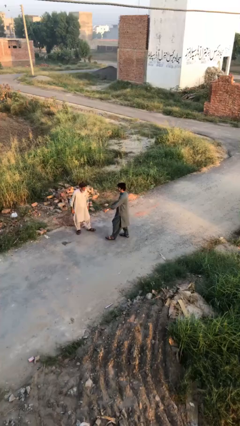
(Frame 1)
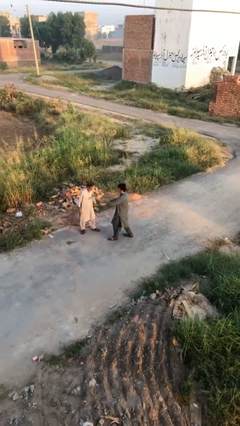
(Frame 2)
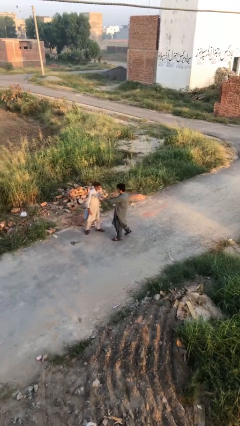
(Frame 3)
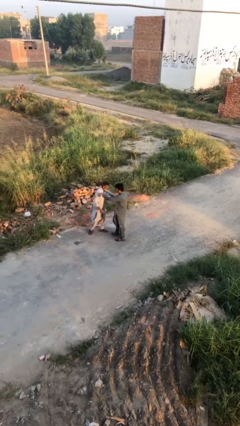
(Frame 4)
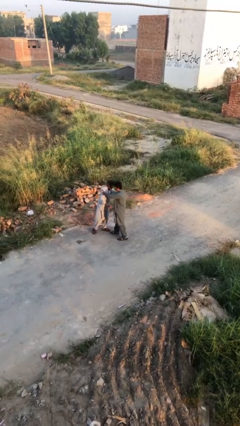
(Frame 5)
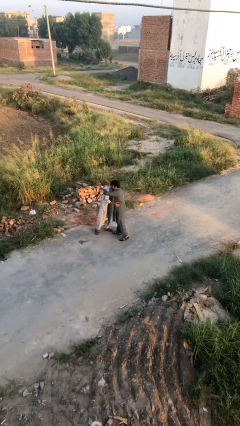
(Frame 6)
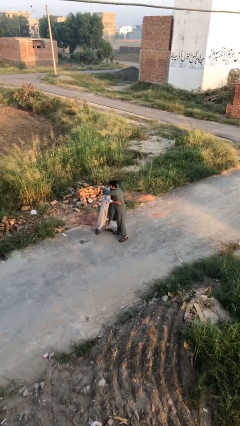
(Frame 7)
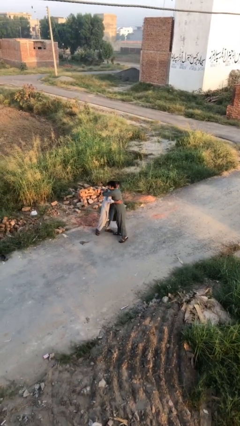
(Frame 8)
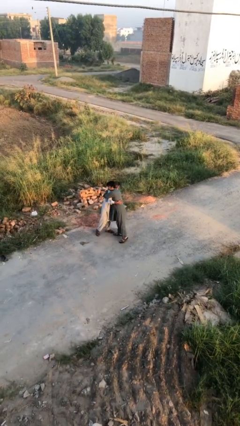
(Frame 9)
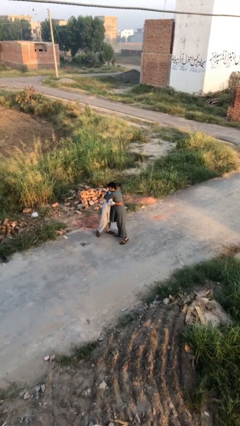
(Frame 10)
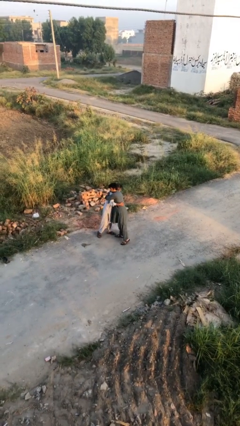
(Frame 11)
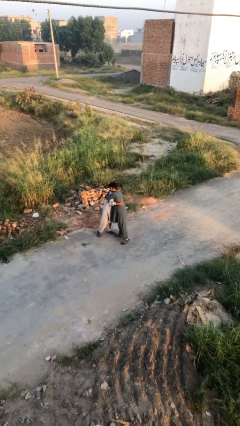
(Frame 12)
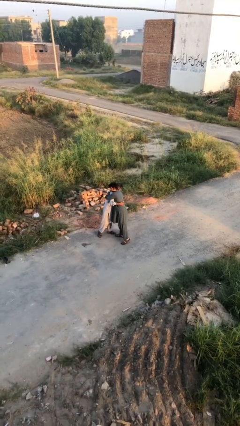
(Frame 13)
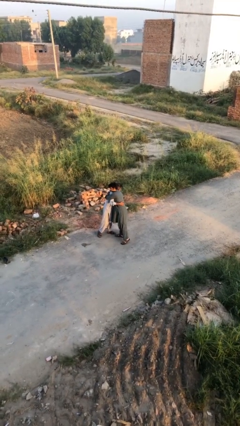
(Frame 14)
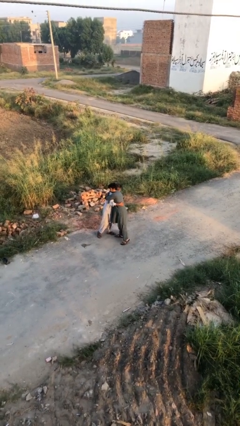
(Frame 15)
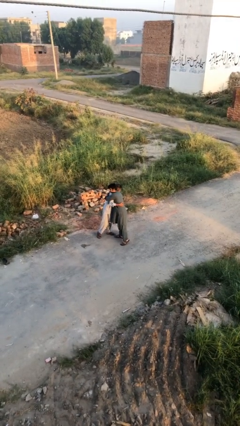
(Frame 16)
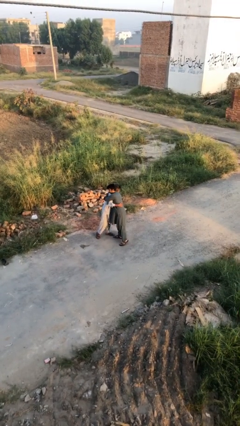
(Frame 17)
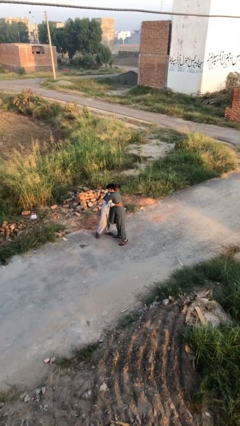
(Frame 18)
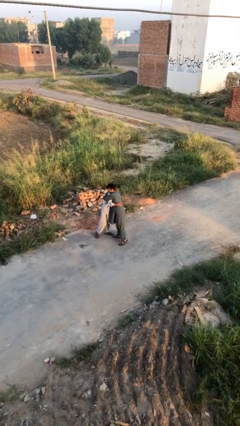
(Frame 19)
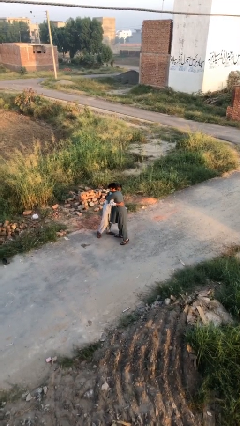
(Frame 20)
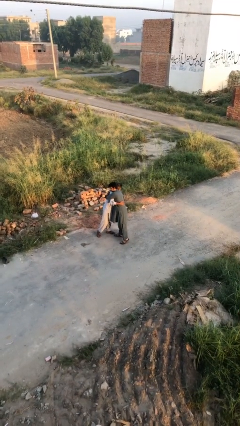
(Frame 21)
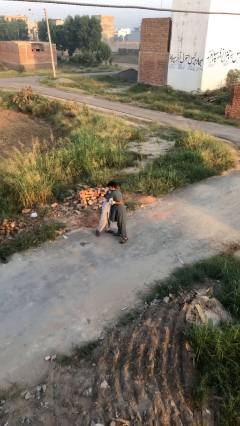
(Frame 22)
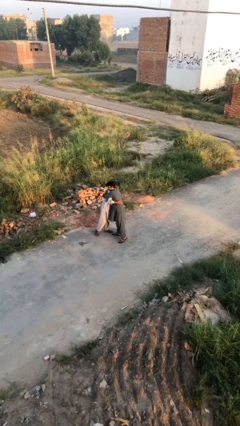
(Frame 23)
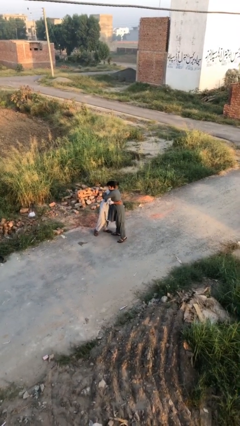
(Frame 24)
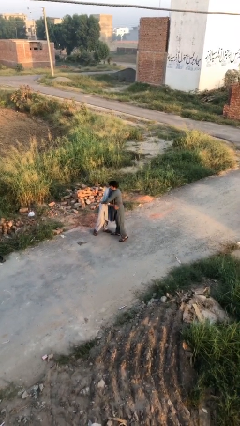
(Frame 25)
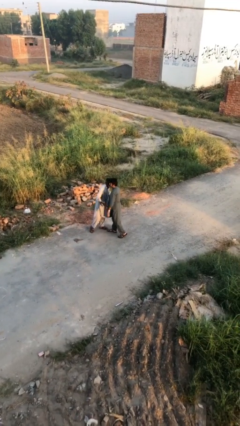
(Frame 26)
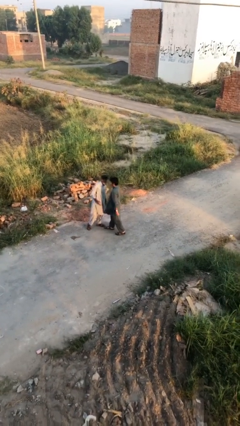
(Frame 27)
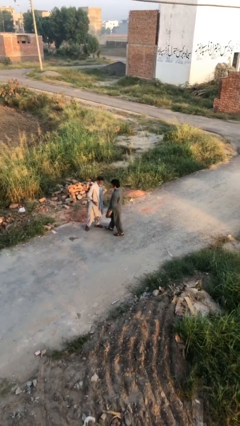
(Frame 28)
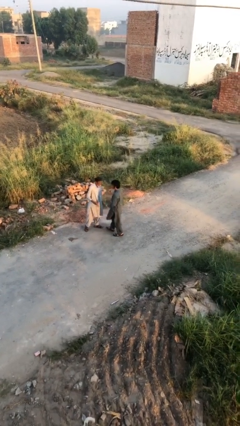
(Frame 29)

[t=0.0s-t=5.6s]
person embraces person

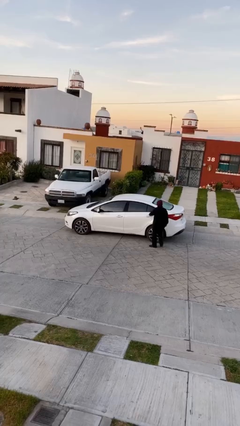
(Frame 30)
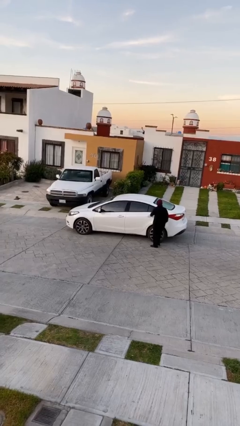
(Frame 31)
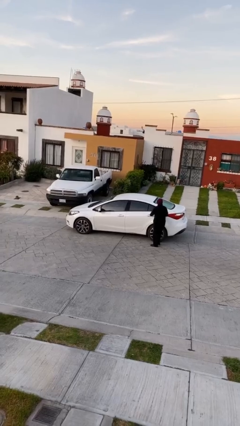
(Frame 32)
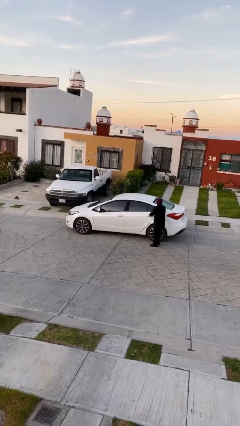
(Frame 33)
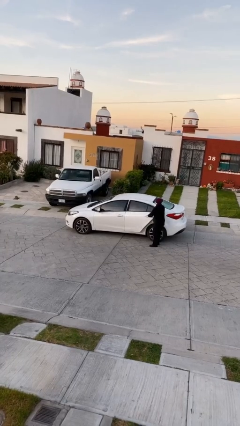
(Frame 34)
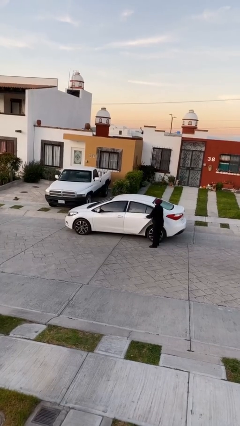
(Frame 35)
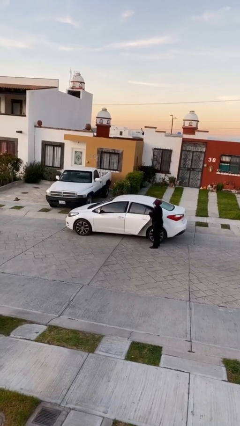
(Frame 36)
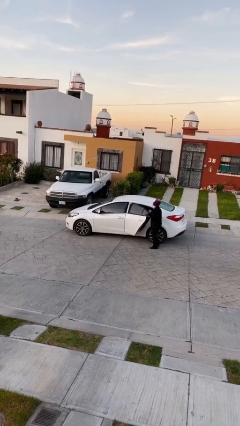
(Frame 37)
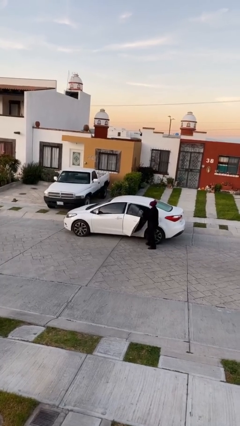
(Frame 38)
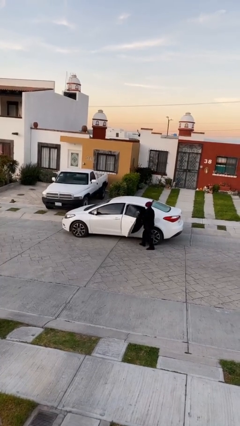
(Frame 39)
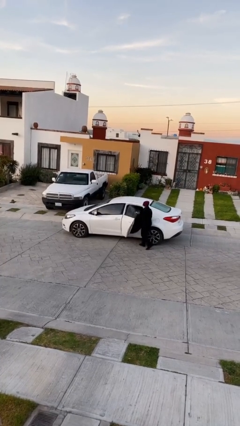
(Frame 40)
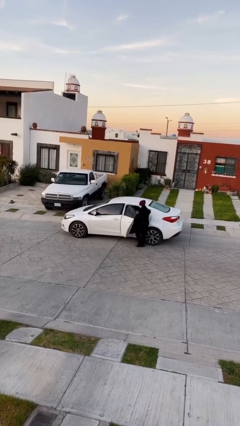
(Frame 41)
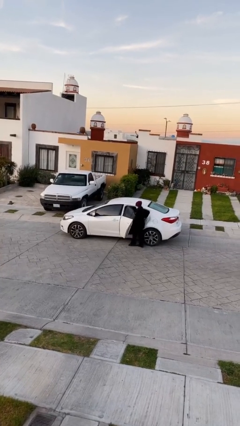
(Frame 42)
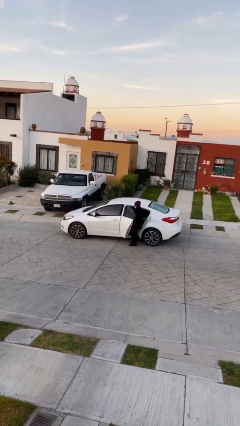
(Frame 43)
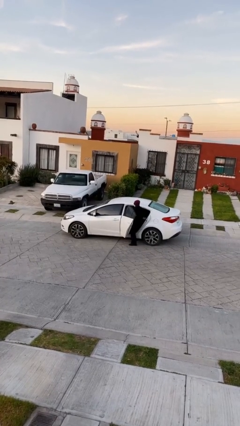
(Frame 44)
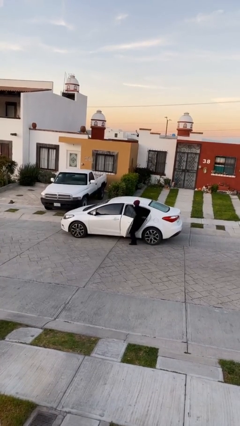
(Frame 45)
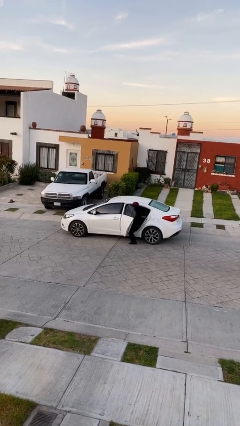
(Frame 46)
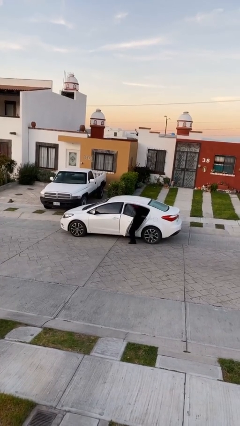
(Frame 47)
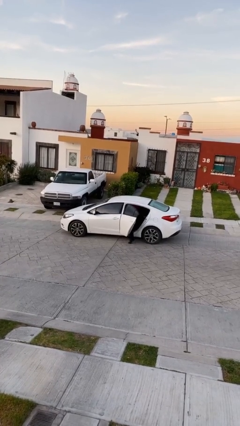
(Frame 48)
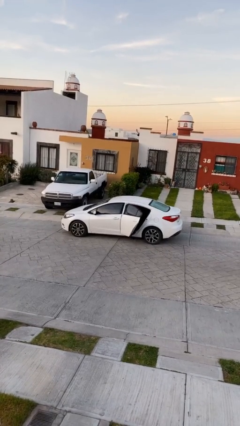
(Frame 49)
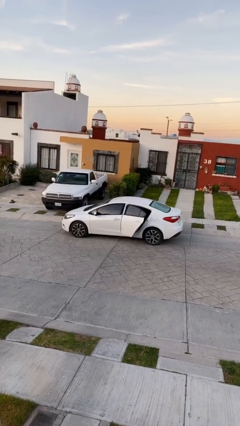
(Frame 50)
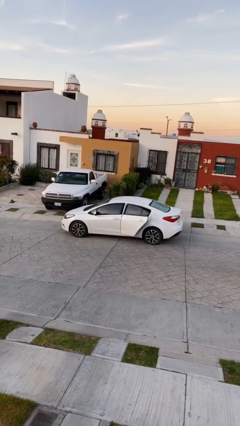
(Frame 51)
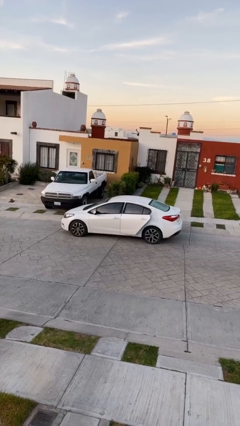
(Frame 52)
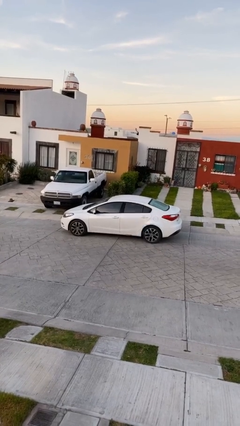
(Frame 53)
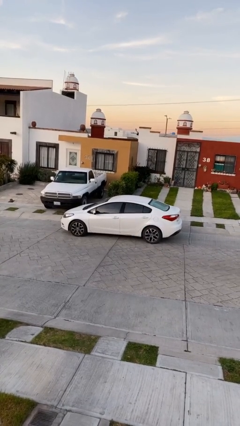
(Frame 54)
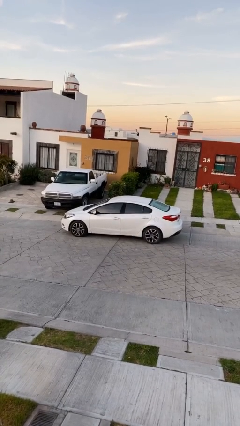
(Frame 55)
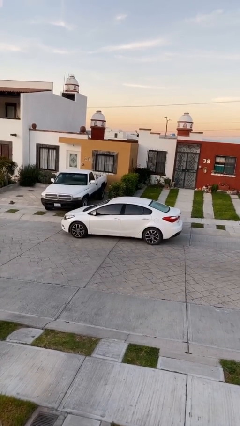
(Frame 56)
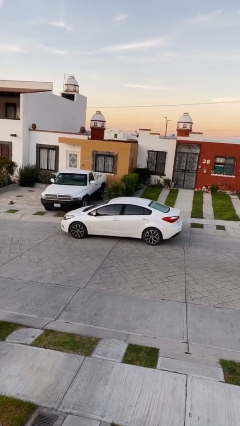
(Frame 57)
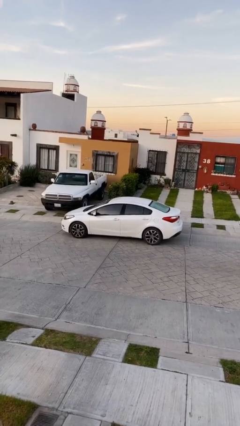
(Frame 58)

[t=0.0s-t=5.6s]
car picks up person

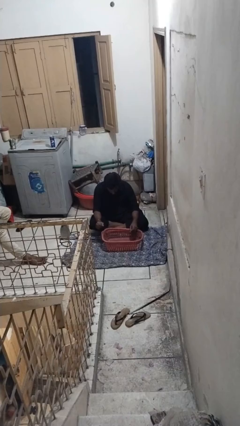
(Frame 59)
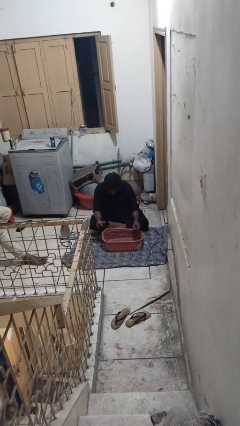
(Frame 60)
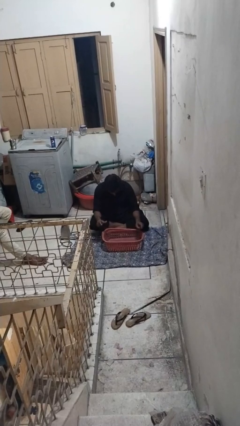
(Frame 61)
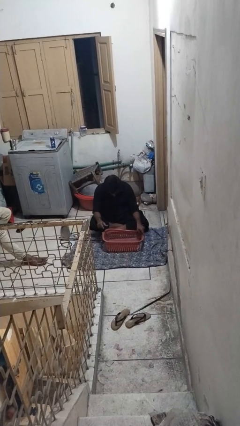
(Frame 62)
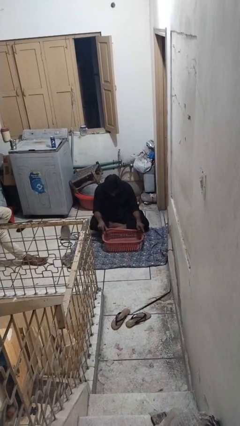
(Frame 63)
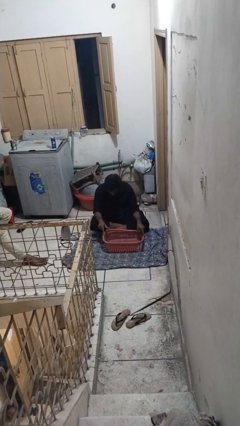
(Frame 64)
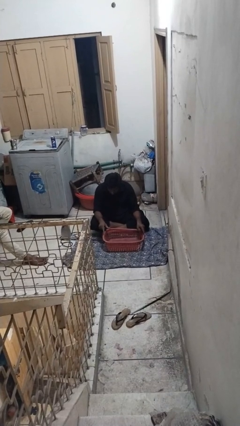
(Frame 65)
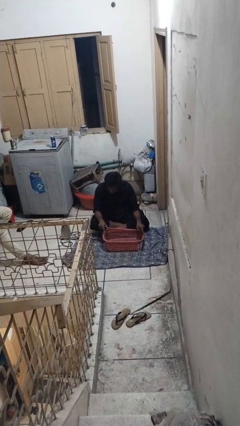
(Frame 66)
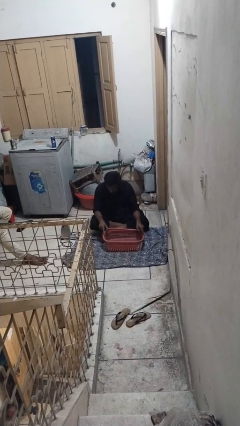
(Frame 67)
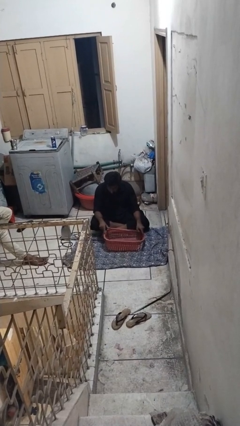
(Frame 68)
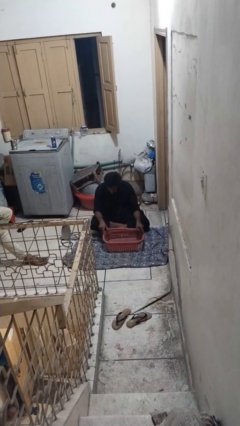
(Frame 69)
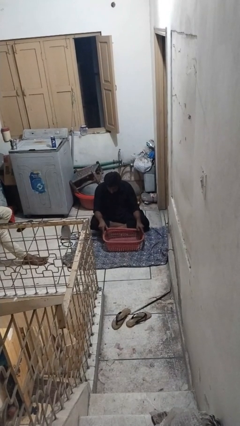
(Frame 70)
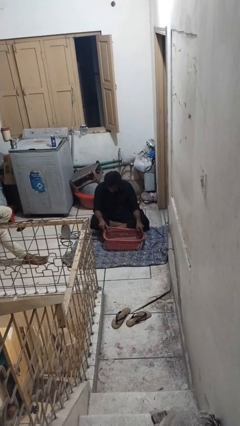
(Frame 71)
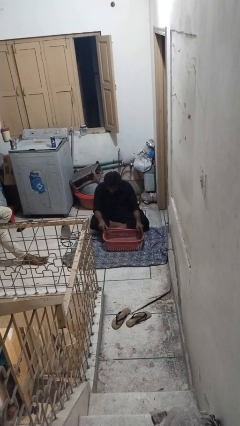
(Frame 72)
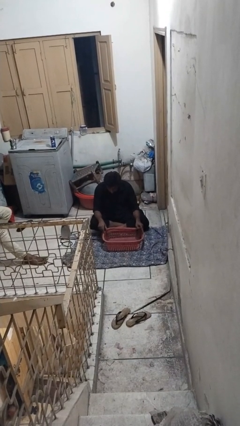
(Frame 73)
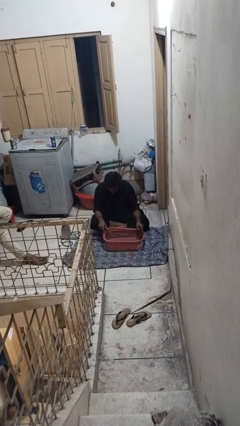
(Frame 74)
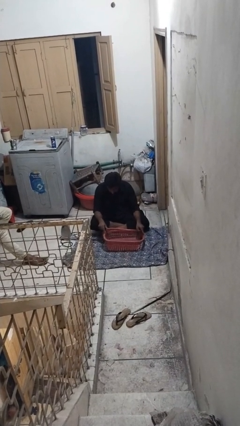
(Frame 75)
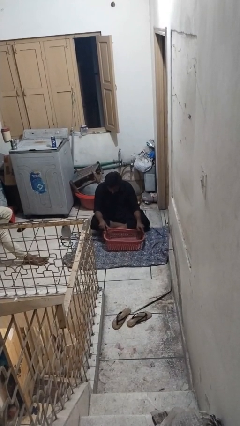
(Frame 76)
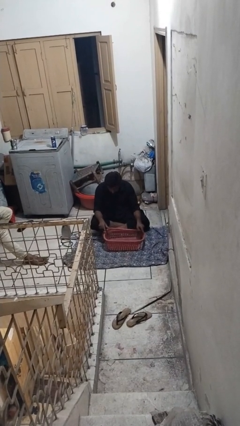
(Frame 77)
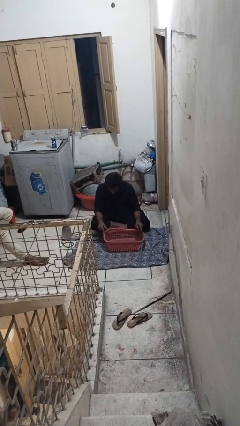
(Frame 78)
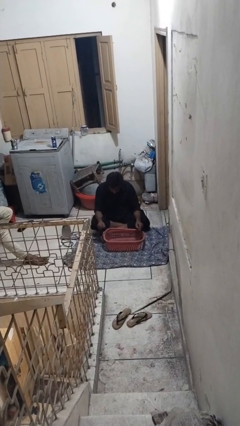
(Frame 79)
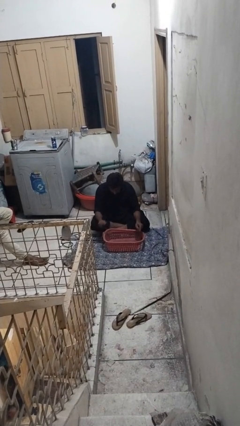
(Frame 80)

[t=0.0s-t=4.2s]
person taps object with finger

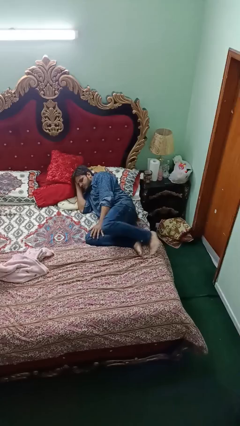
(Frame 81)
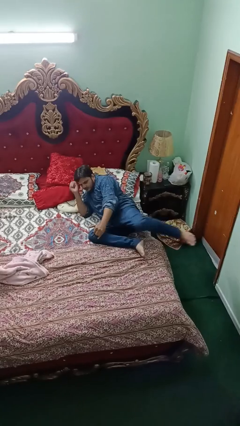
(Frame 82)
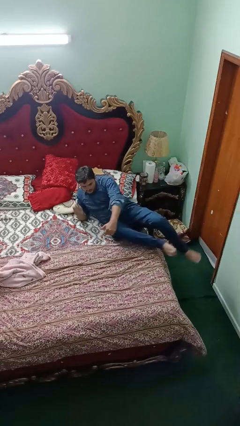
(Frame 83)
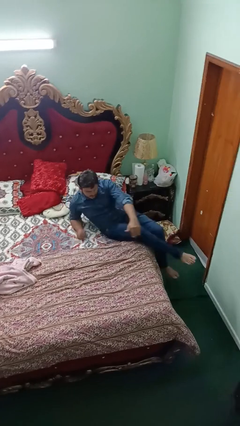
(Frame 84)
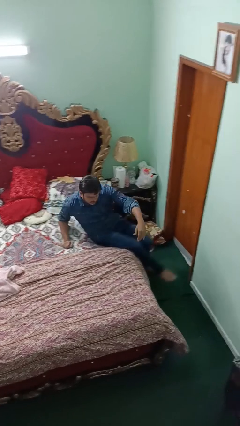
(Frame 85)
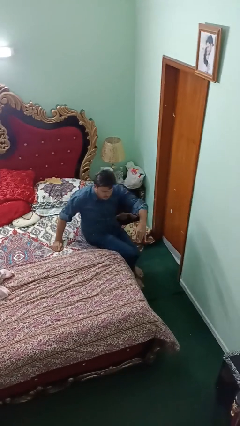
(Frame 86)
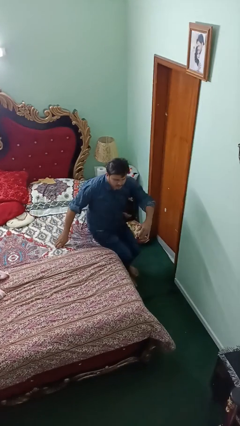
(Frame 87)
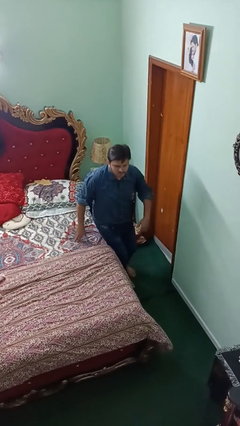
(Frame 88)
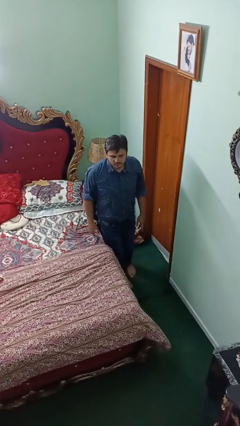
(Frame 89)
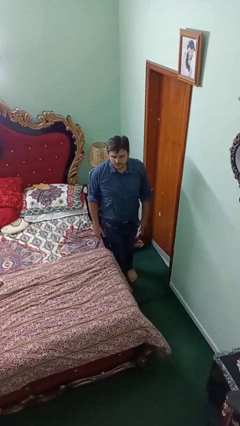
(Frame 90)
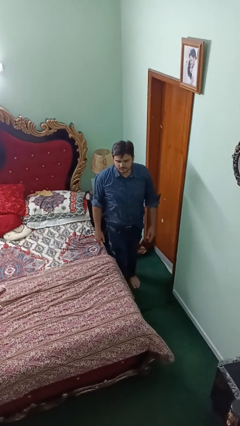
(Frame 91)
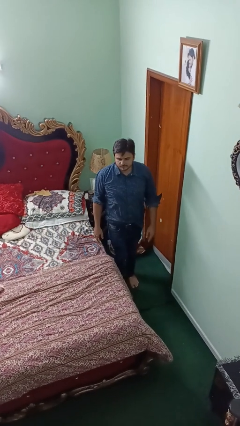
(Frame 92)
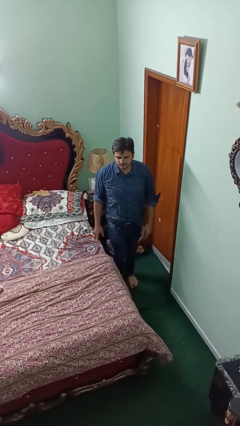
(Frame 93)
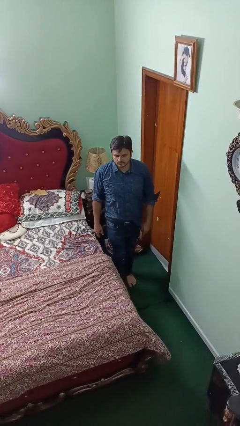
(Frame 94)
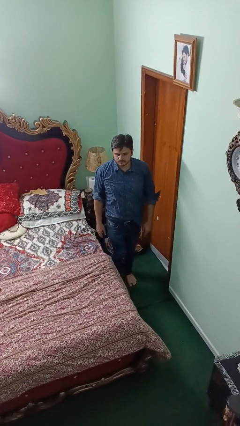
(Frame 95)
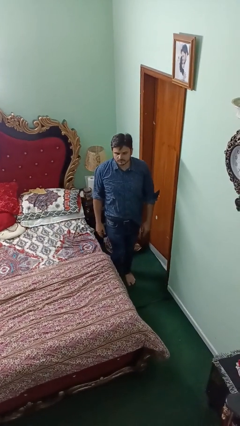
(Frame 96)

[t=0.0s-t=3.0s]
person stands up
